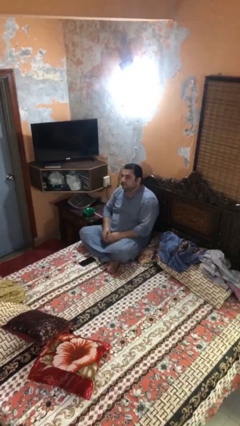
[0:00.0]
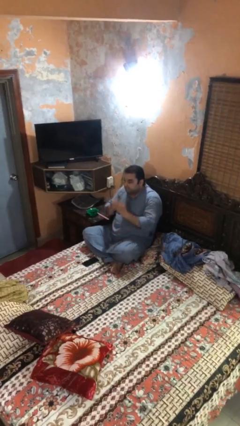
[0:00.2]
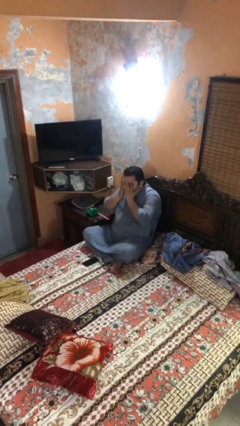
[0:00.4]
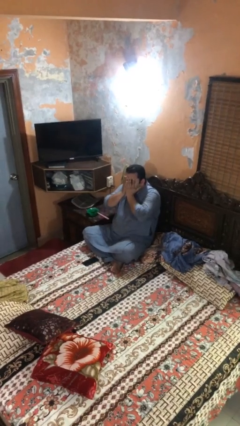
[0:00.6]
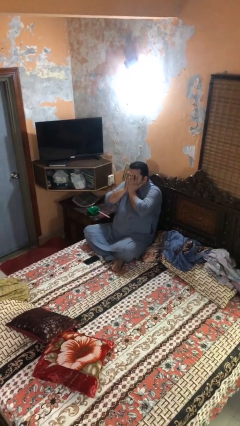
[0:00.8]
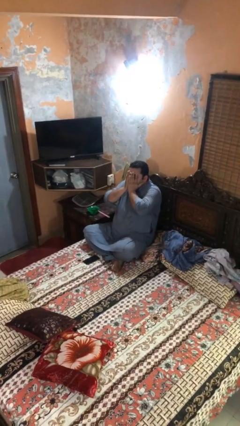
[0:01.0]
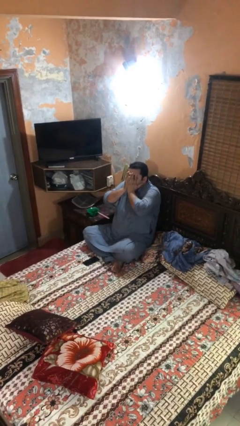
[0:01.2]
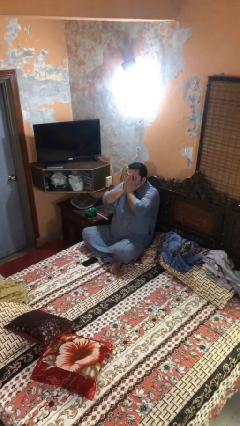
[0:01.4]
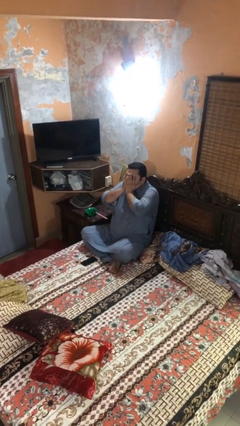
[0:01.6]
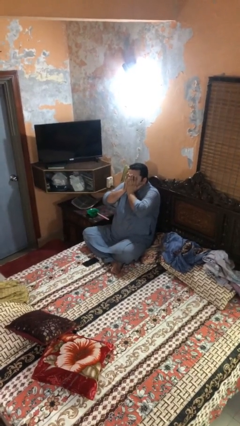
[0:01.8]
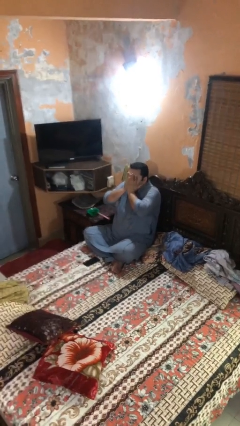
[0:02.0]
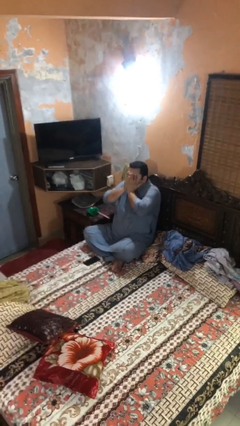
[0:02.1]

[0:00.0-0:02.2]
person covers face with hands

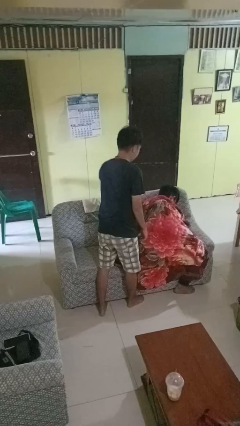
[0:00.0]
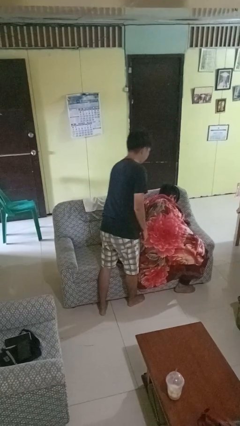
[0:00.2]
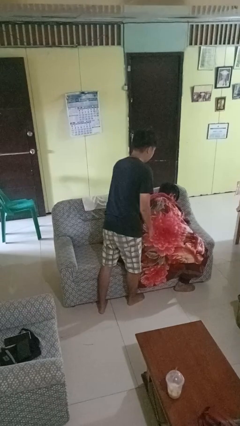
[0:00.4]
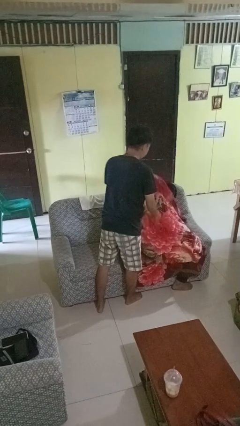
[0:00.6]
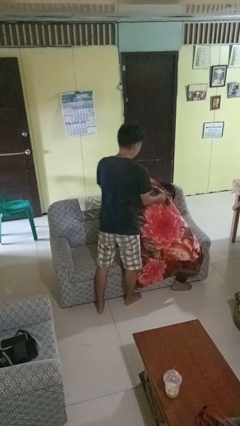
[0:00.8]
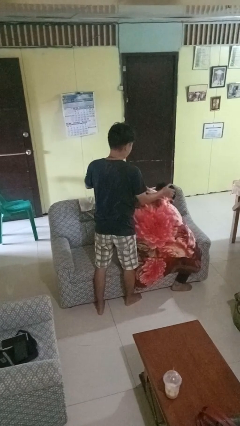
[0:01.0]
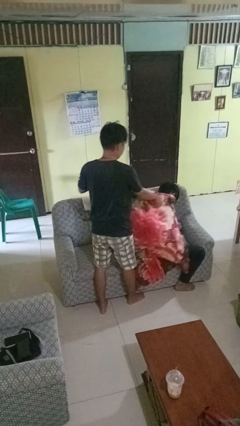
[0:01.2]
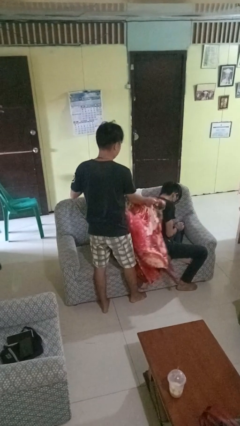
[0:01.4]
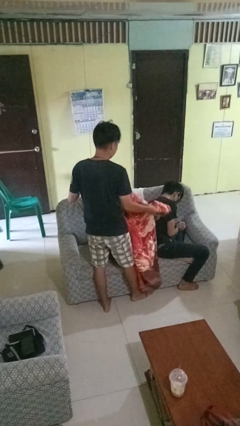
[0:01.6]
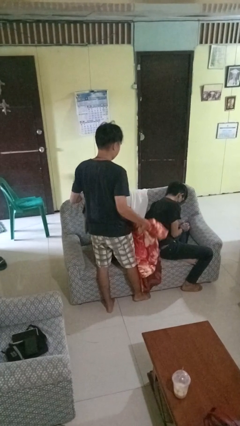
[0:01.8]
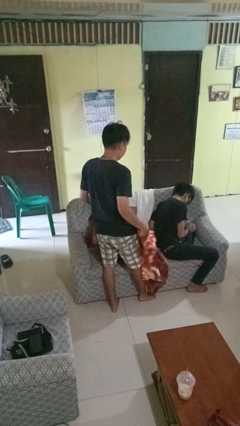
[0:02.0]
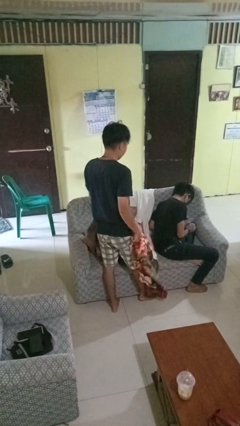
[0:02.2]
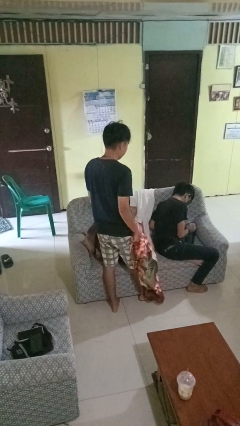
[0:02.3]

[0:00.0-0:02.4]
person uncovers friend with blanket

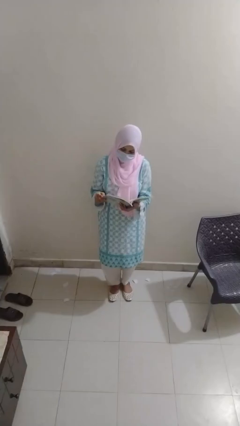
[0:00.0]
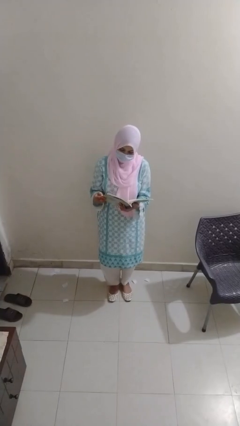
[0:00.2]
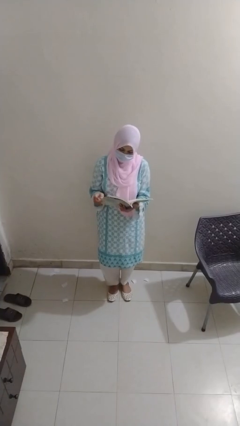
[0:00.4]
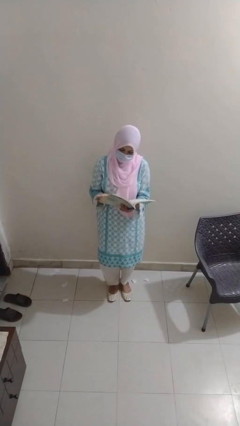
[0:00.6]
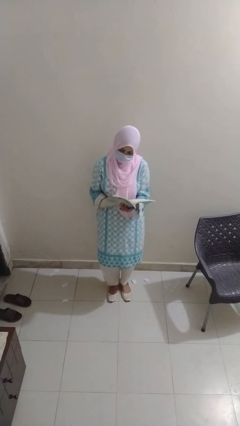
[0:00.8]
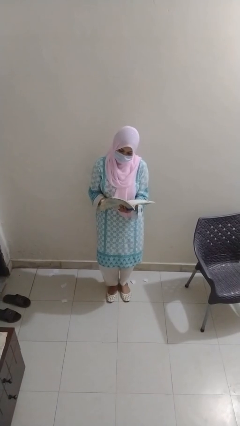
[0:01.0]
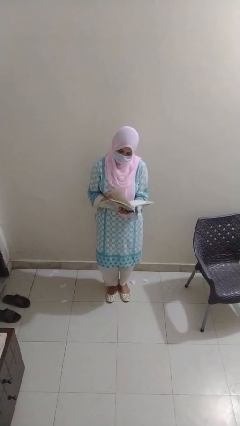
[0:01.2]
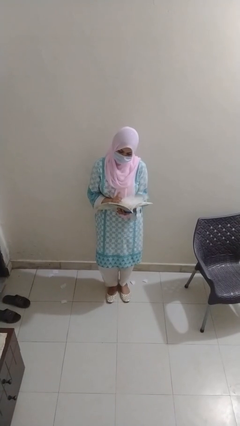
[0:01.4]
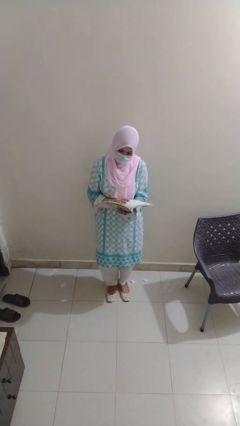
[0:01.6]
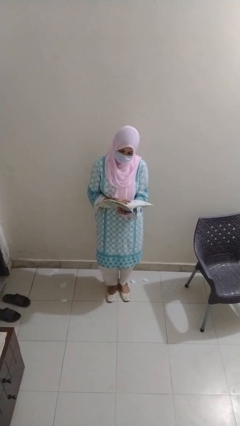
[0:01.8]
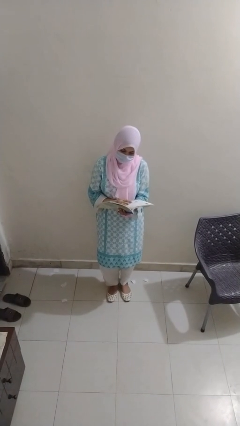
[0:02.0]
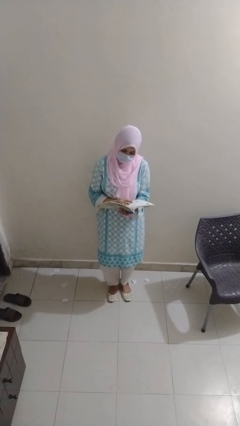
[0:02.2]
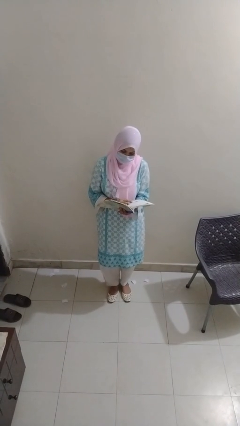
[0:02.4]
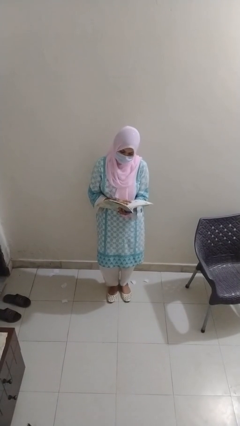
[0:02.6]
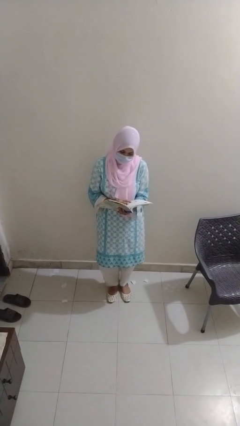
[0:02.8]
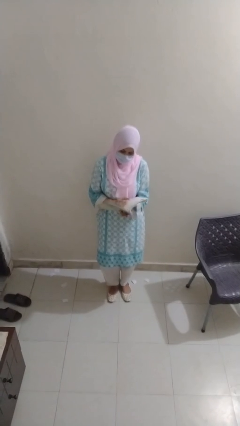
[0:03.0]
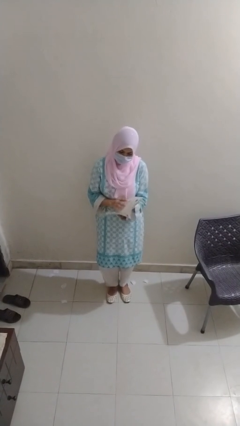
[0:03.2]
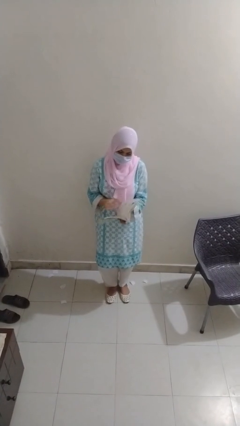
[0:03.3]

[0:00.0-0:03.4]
person reads book

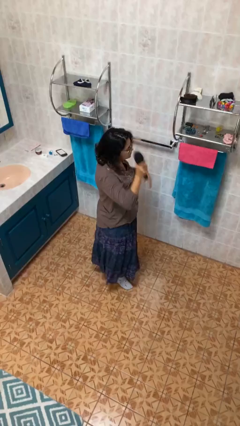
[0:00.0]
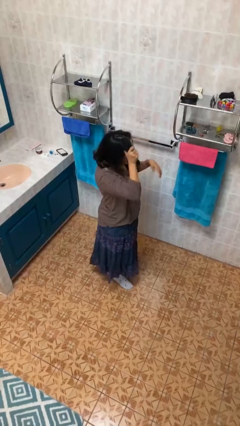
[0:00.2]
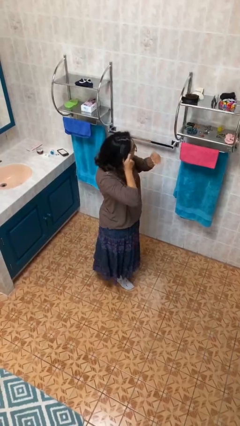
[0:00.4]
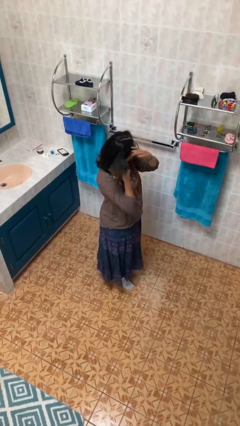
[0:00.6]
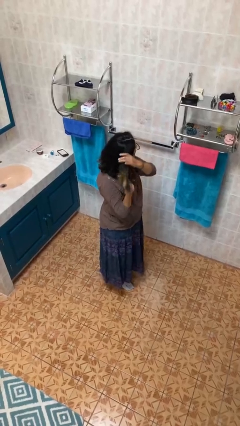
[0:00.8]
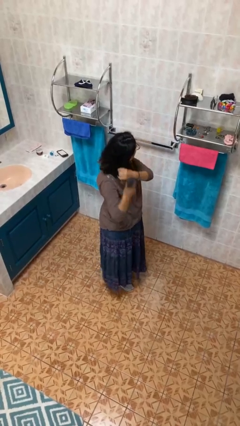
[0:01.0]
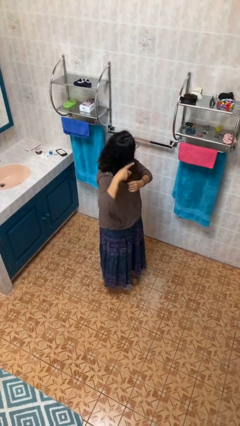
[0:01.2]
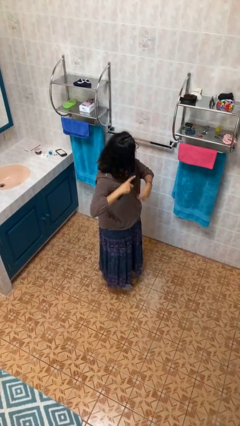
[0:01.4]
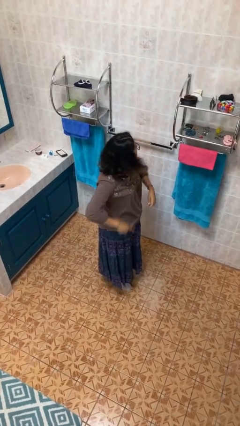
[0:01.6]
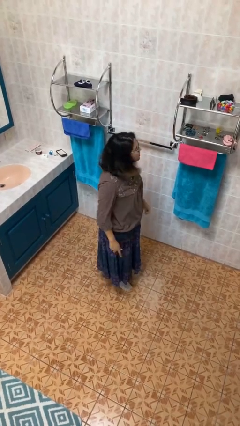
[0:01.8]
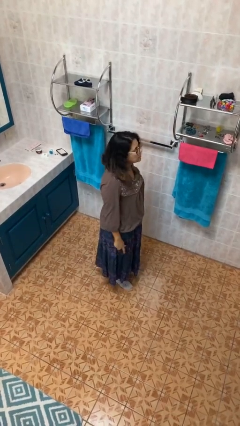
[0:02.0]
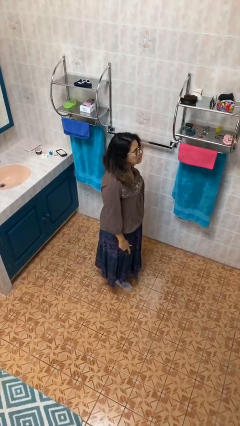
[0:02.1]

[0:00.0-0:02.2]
person brushes hair

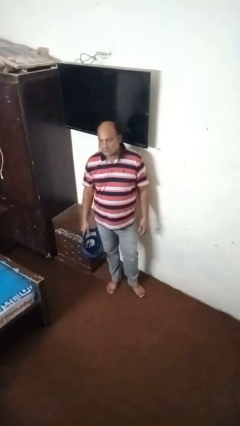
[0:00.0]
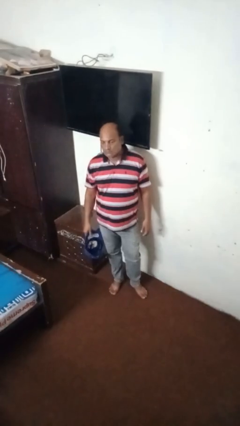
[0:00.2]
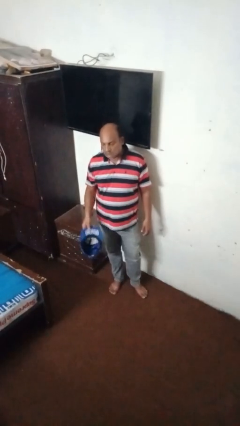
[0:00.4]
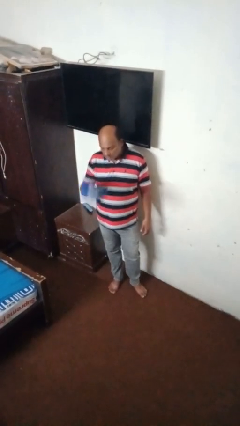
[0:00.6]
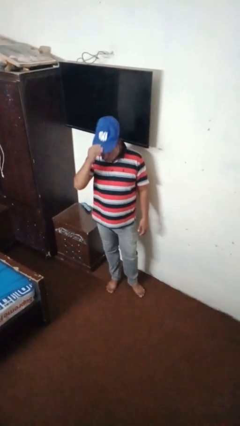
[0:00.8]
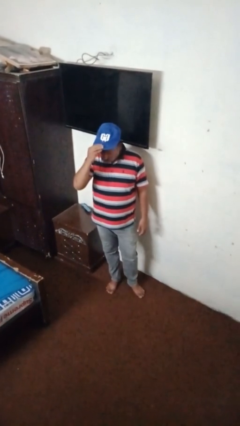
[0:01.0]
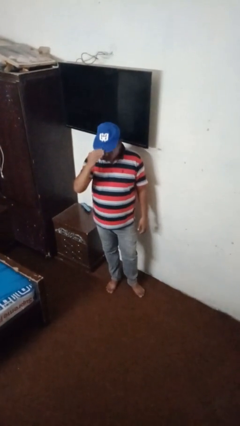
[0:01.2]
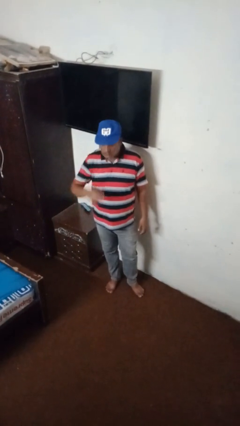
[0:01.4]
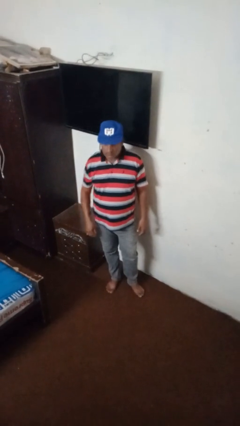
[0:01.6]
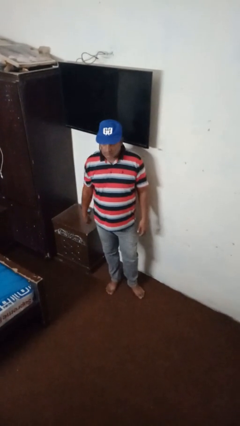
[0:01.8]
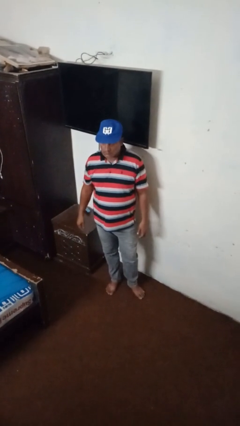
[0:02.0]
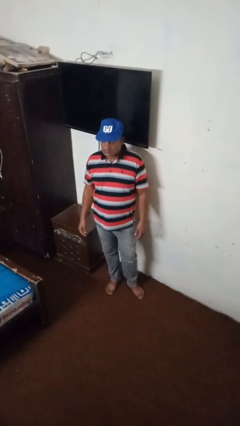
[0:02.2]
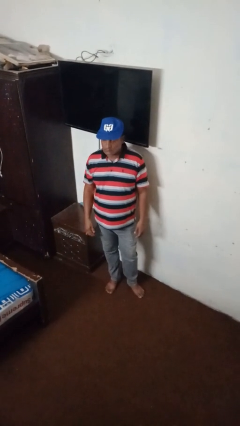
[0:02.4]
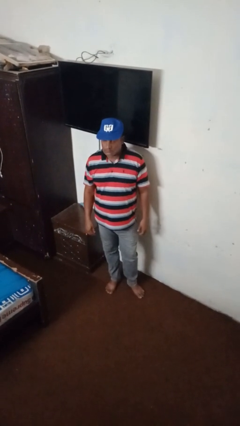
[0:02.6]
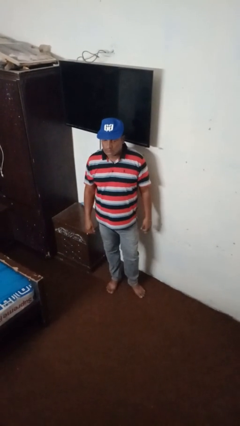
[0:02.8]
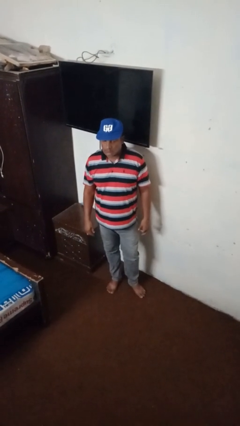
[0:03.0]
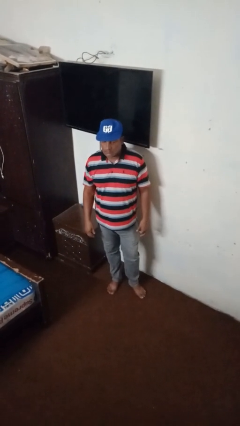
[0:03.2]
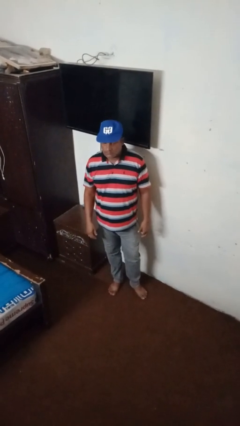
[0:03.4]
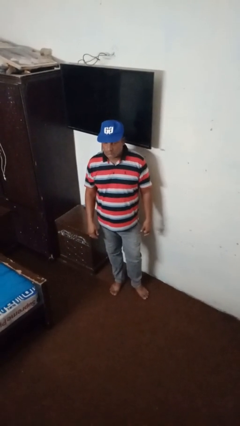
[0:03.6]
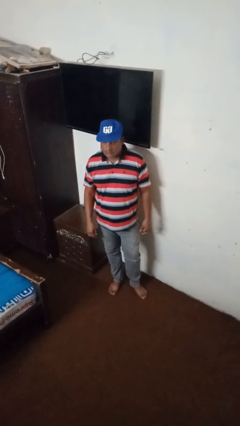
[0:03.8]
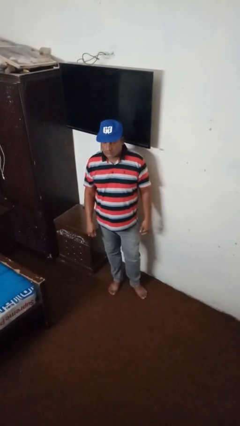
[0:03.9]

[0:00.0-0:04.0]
person puts on hat

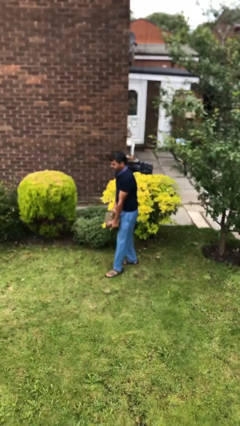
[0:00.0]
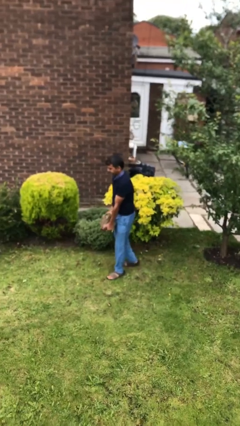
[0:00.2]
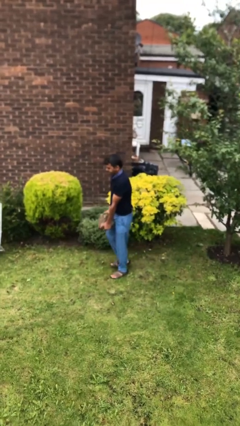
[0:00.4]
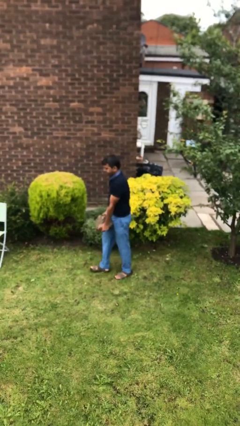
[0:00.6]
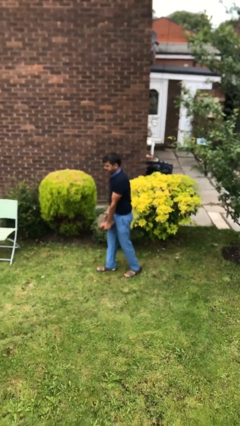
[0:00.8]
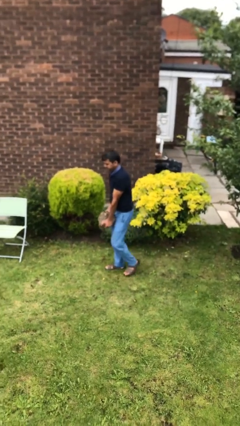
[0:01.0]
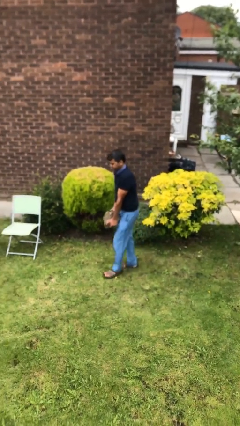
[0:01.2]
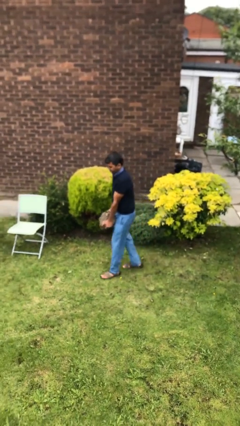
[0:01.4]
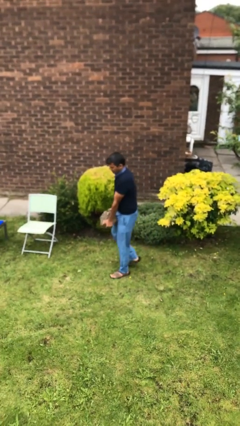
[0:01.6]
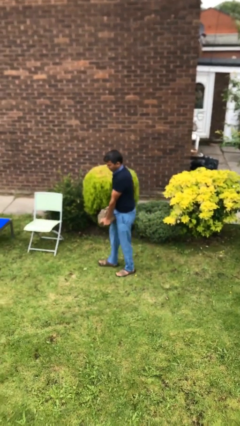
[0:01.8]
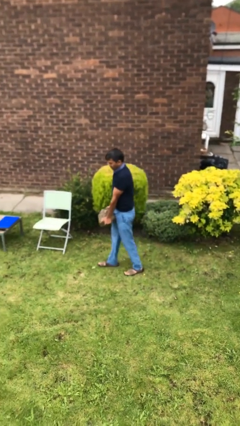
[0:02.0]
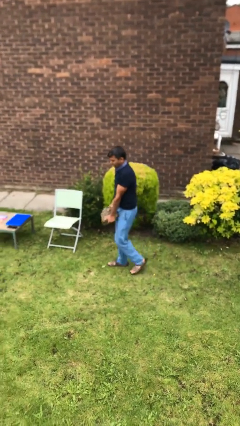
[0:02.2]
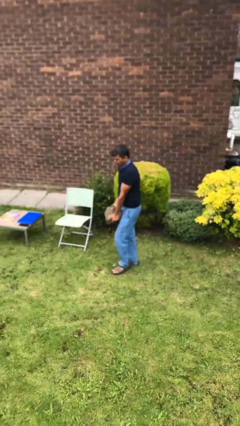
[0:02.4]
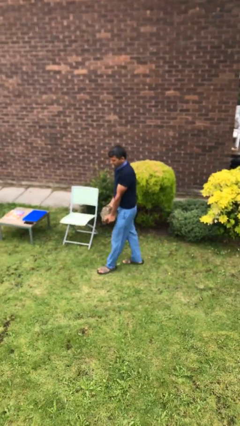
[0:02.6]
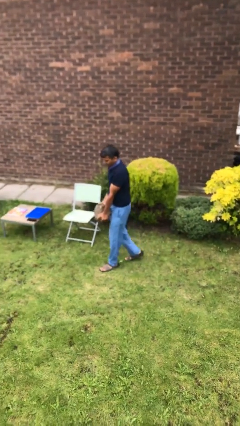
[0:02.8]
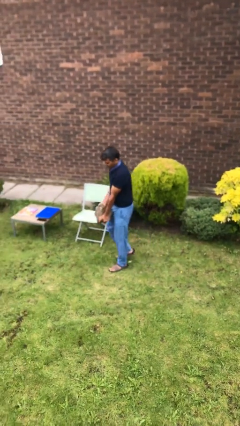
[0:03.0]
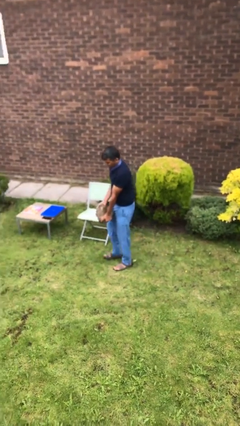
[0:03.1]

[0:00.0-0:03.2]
person carries heavy object
